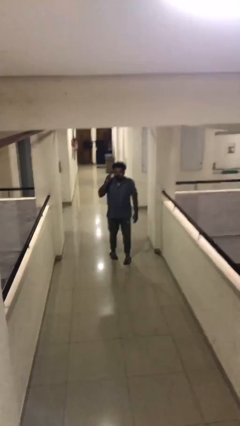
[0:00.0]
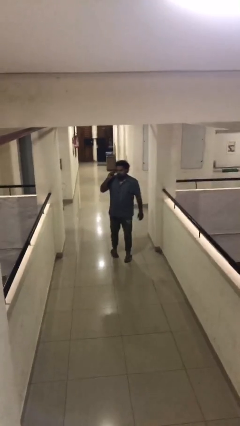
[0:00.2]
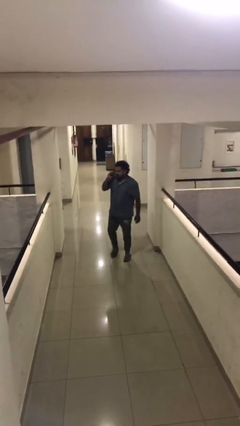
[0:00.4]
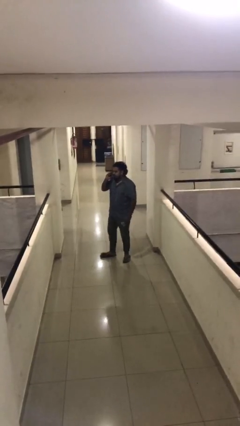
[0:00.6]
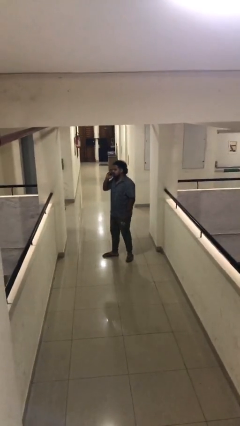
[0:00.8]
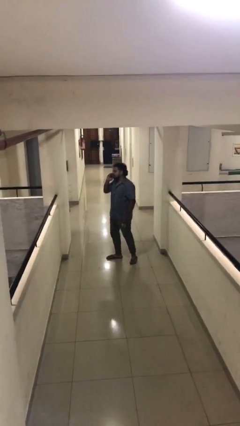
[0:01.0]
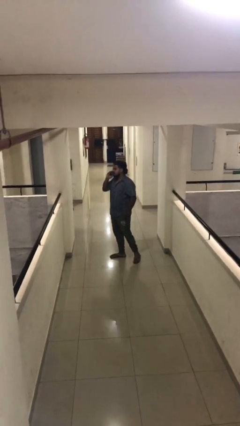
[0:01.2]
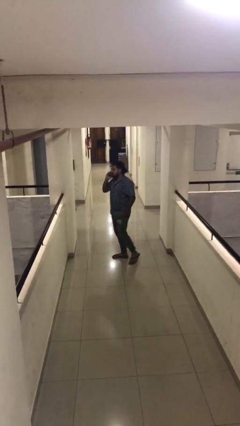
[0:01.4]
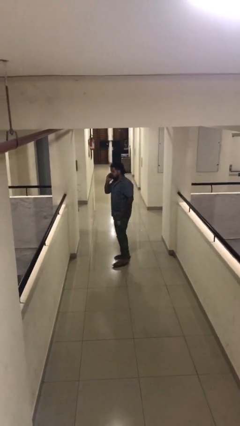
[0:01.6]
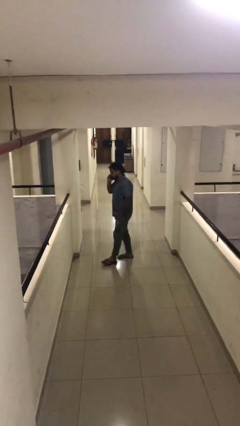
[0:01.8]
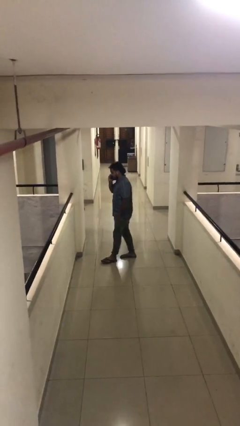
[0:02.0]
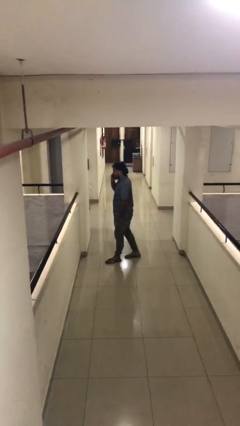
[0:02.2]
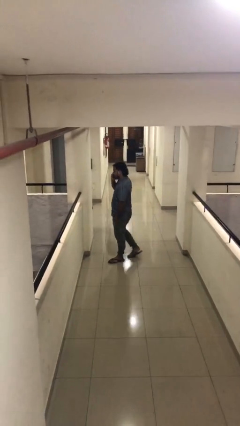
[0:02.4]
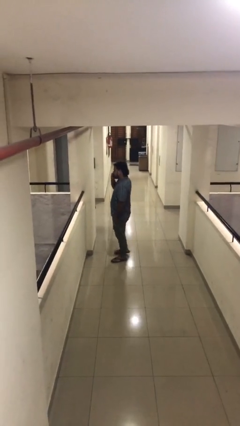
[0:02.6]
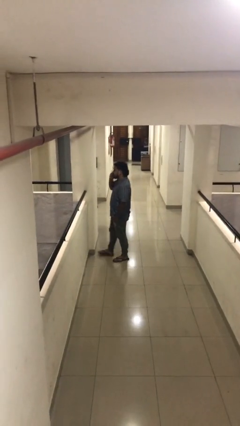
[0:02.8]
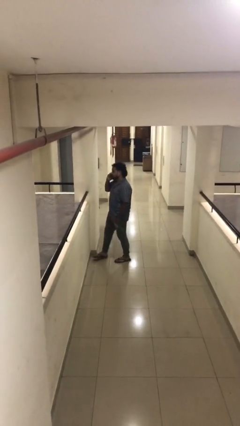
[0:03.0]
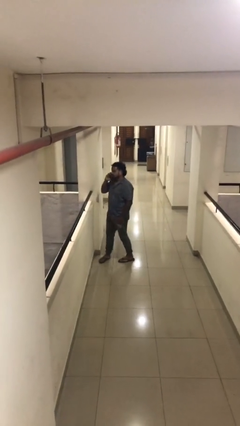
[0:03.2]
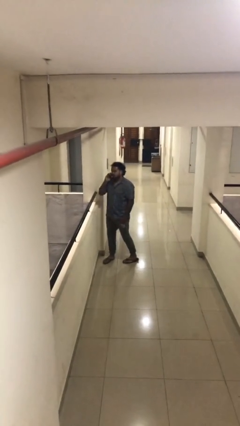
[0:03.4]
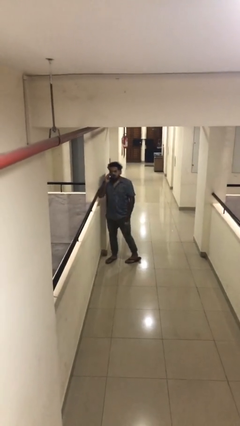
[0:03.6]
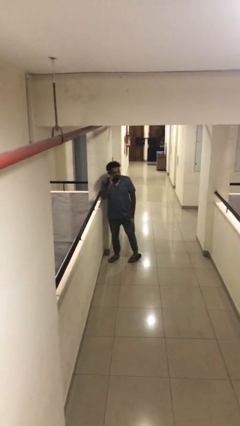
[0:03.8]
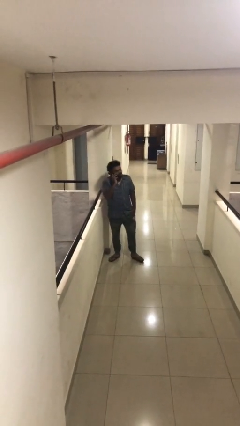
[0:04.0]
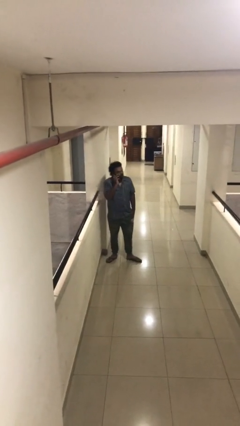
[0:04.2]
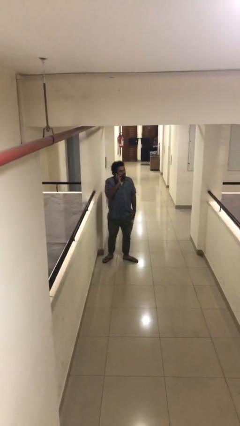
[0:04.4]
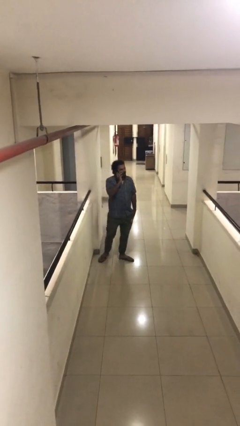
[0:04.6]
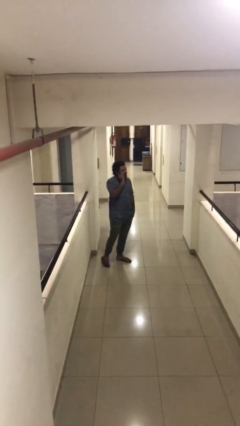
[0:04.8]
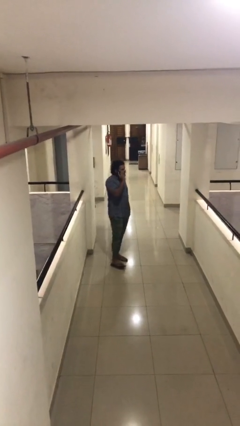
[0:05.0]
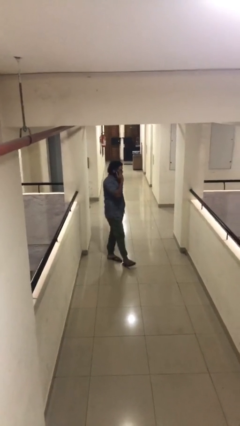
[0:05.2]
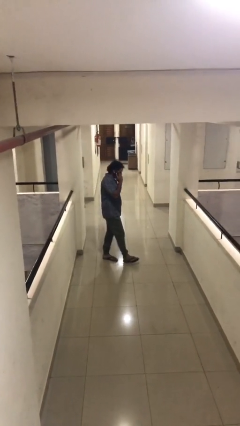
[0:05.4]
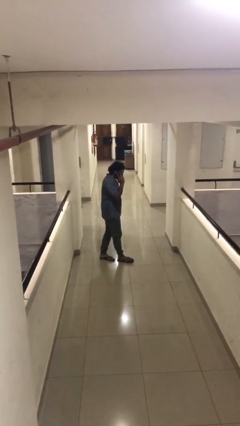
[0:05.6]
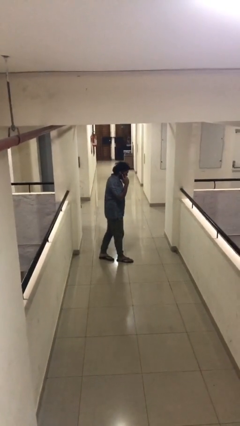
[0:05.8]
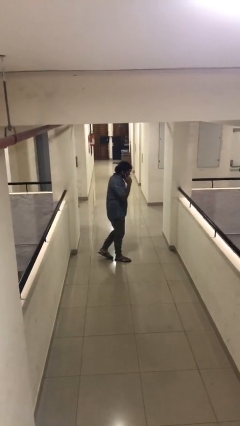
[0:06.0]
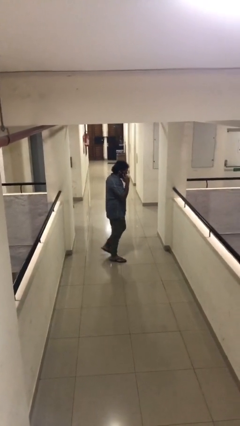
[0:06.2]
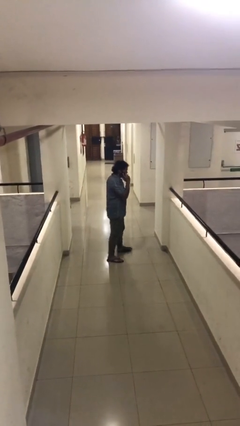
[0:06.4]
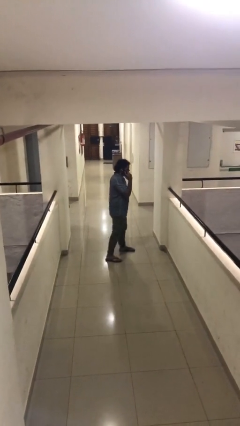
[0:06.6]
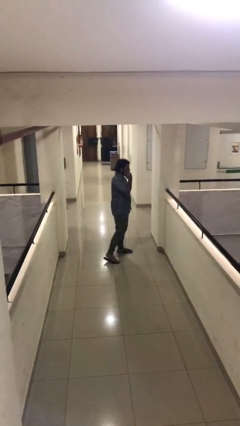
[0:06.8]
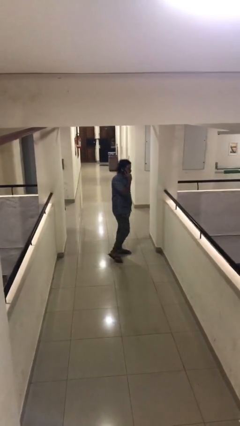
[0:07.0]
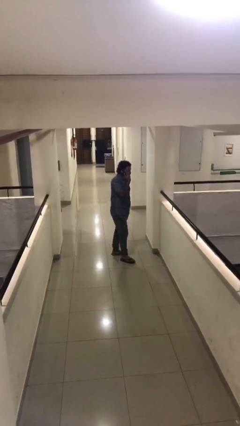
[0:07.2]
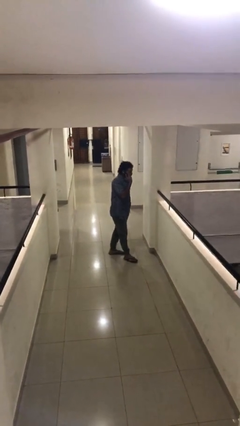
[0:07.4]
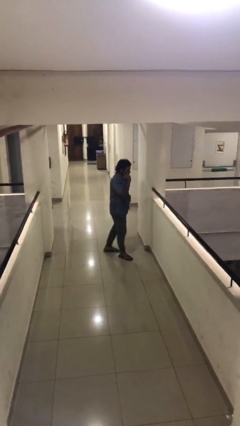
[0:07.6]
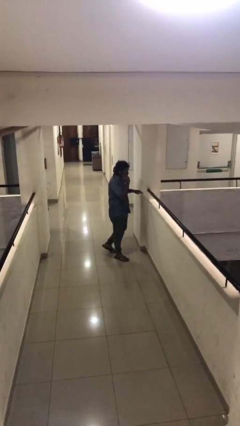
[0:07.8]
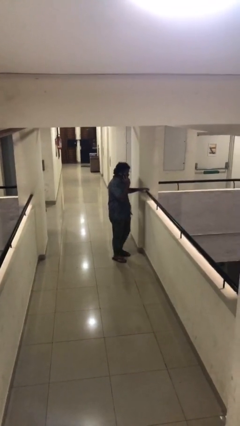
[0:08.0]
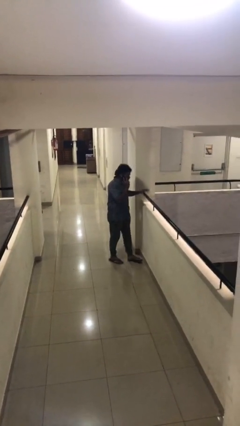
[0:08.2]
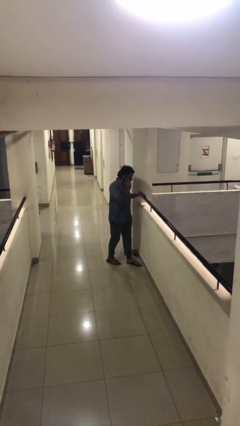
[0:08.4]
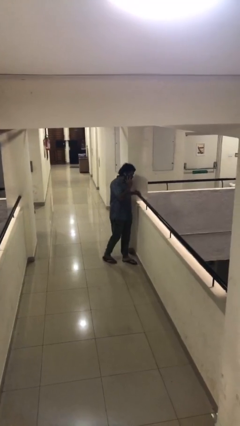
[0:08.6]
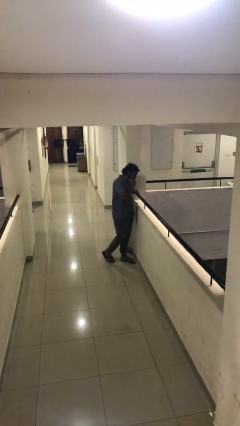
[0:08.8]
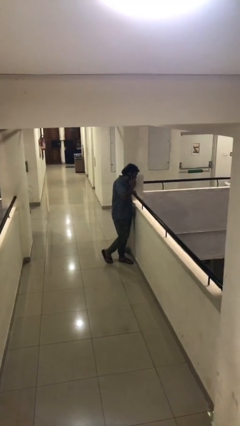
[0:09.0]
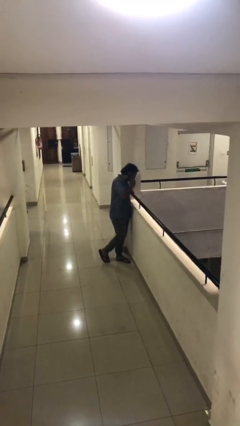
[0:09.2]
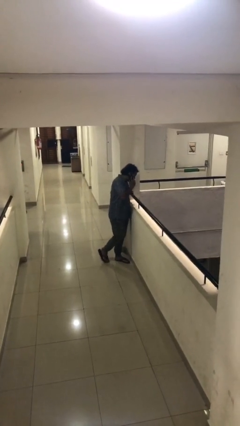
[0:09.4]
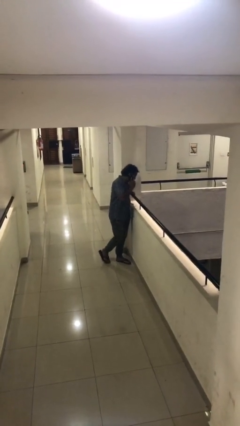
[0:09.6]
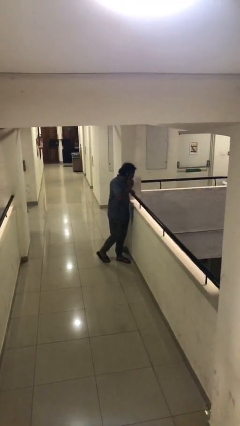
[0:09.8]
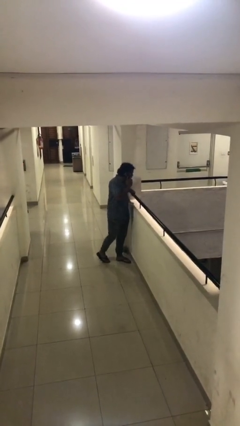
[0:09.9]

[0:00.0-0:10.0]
person talks on phone

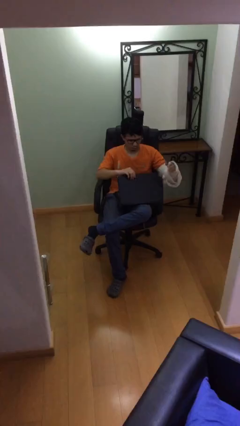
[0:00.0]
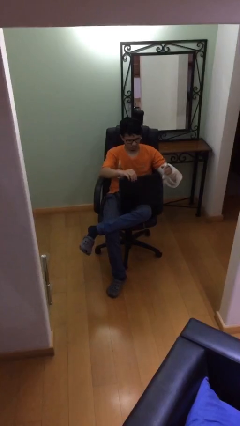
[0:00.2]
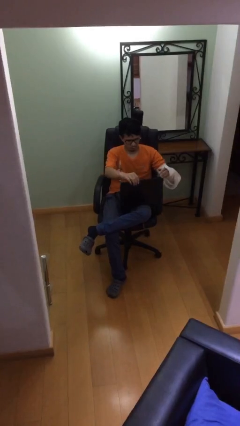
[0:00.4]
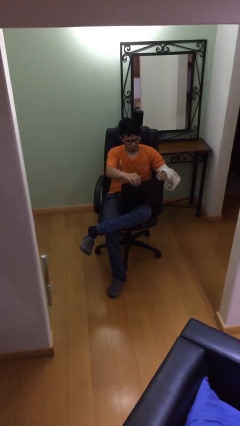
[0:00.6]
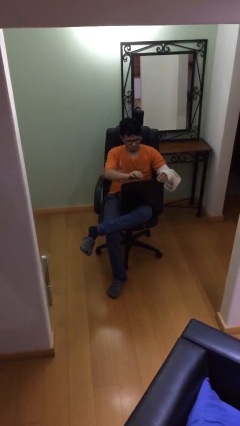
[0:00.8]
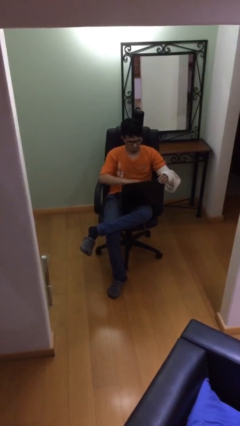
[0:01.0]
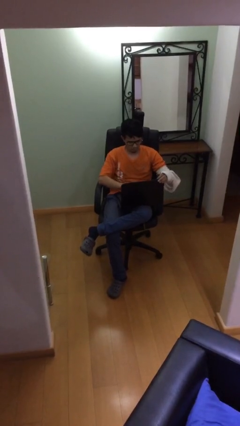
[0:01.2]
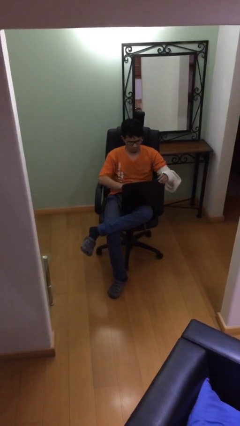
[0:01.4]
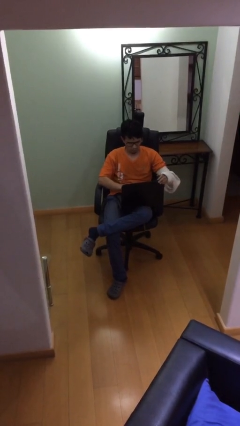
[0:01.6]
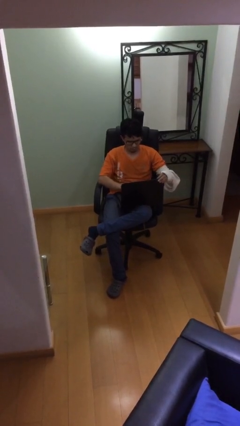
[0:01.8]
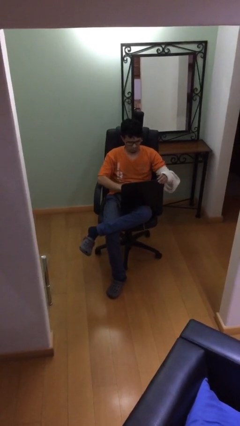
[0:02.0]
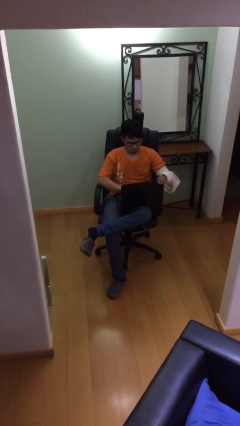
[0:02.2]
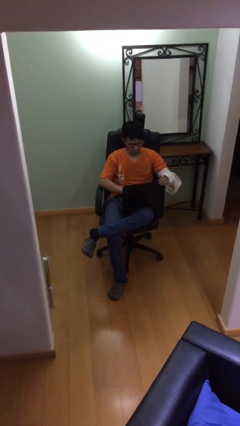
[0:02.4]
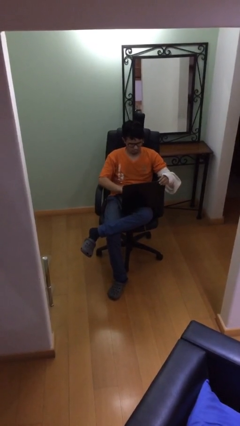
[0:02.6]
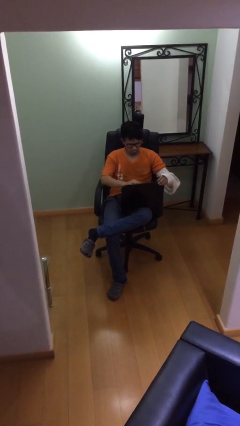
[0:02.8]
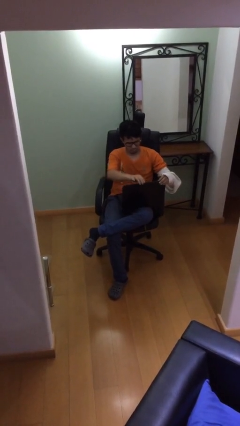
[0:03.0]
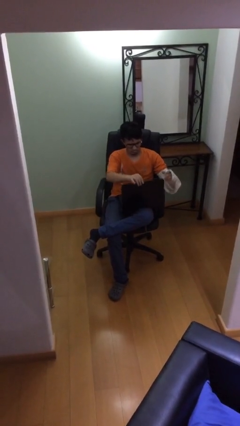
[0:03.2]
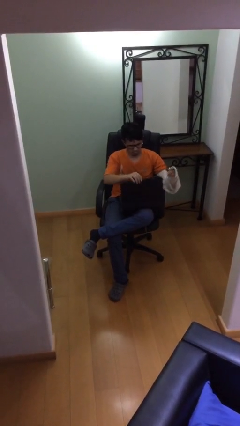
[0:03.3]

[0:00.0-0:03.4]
person interacts with laptop

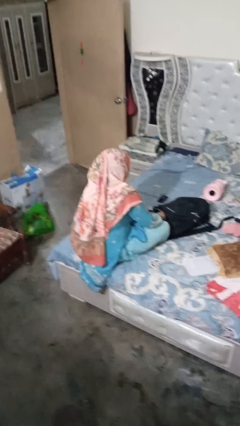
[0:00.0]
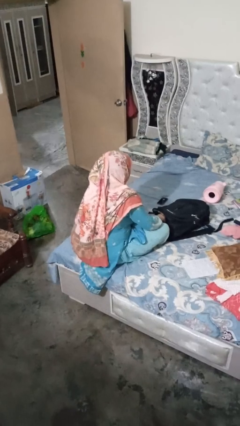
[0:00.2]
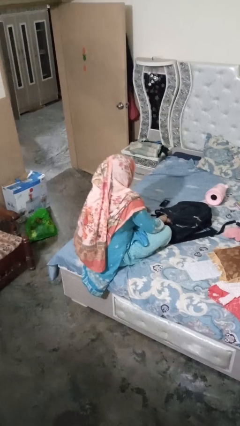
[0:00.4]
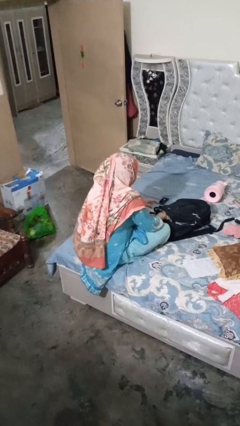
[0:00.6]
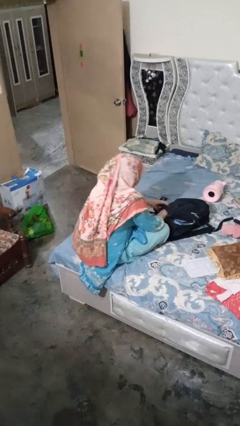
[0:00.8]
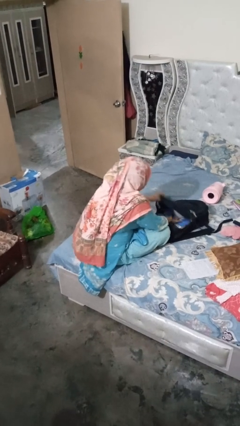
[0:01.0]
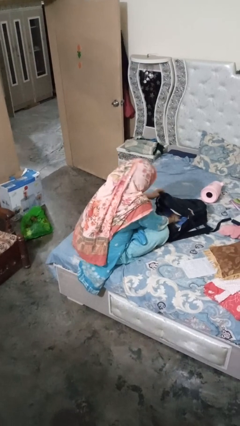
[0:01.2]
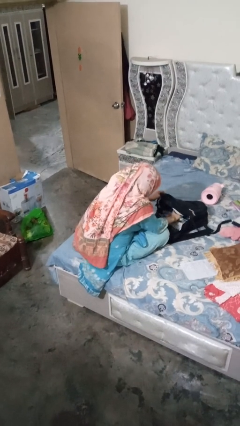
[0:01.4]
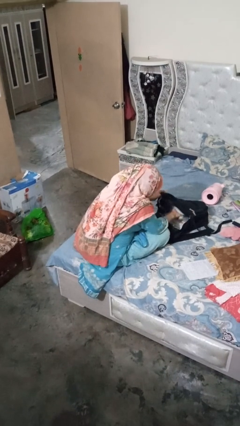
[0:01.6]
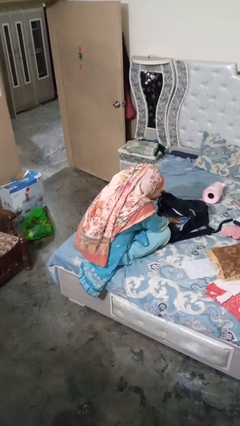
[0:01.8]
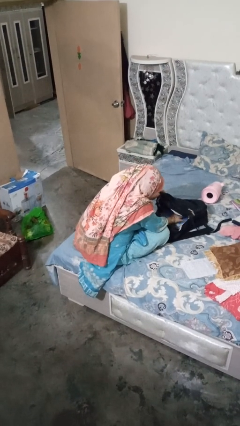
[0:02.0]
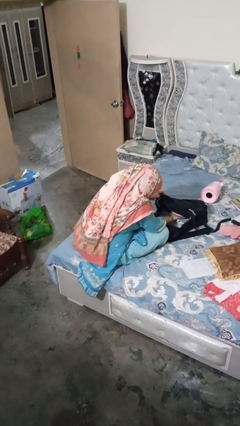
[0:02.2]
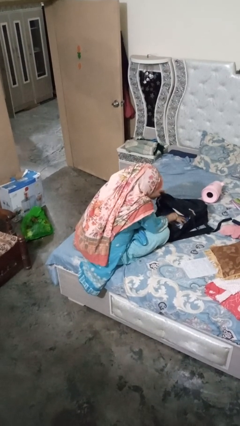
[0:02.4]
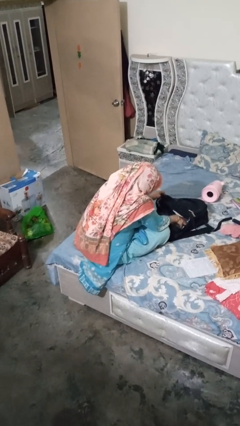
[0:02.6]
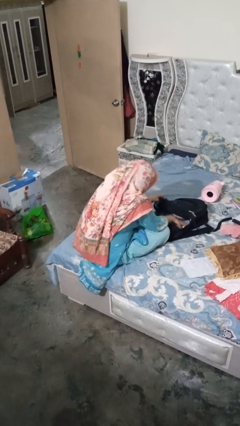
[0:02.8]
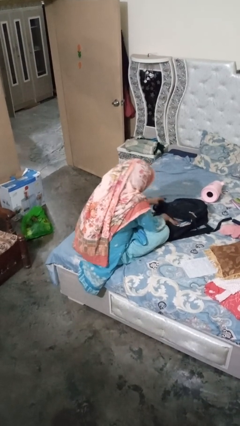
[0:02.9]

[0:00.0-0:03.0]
person searches in bag

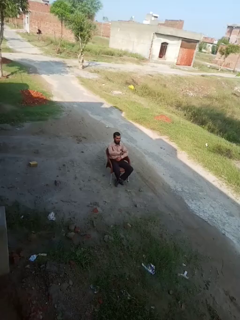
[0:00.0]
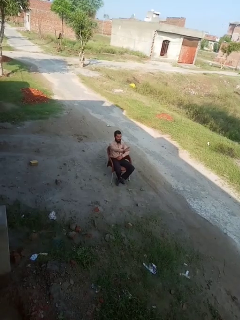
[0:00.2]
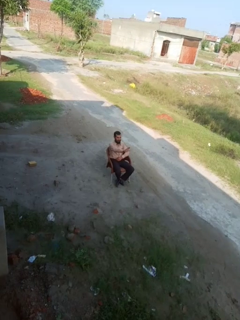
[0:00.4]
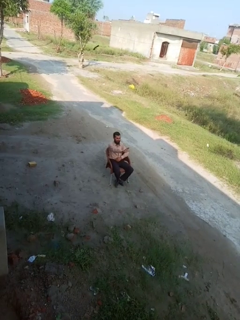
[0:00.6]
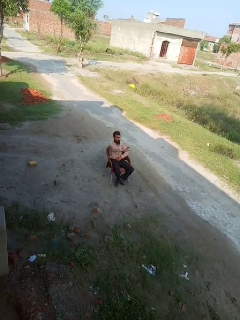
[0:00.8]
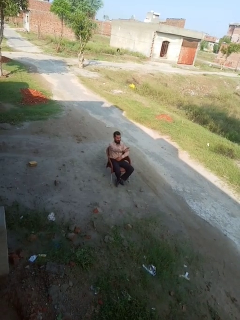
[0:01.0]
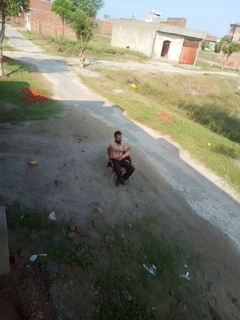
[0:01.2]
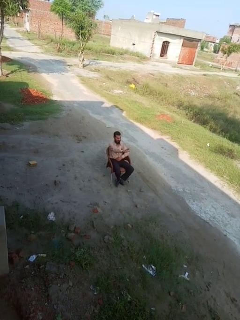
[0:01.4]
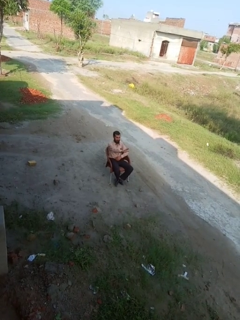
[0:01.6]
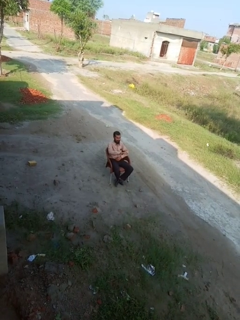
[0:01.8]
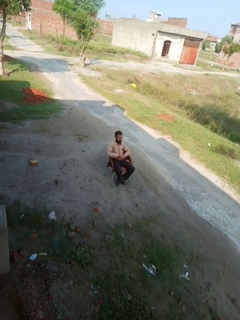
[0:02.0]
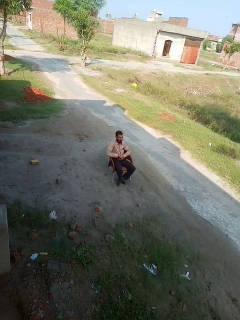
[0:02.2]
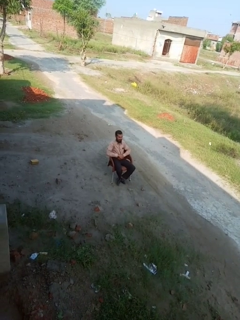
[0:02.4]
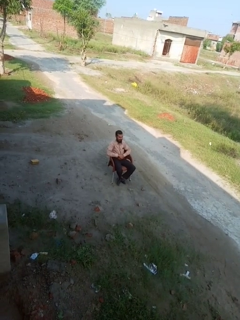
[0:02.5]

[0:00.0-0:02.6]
person gestures stop
